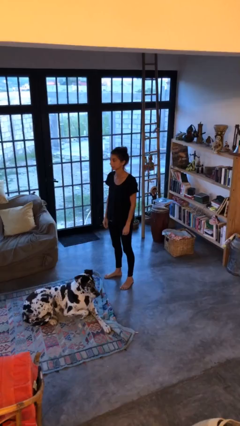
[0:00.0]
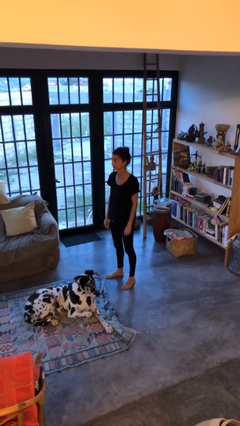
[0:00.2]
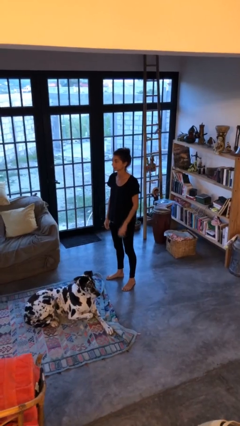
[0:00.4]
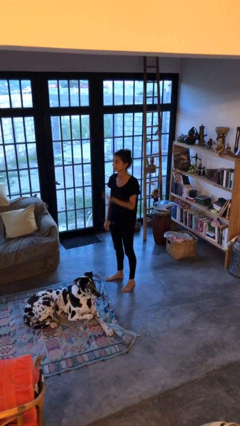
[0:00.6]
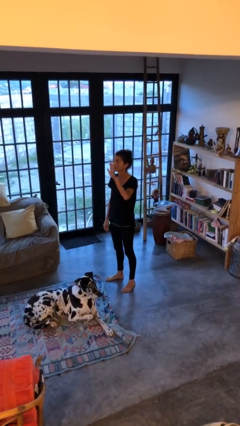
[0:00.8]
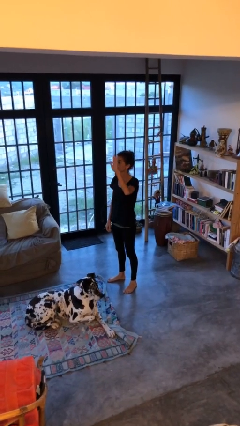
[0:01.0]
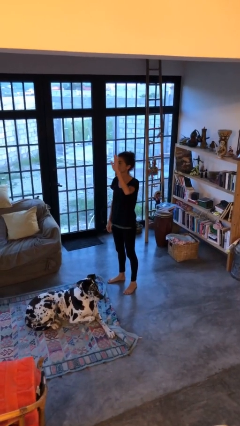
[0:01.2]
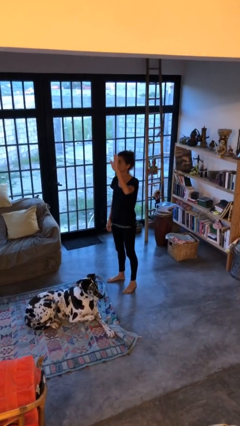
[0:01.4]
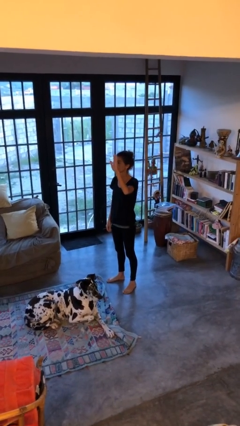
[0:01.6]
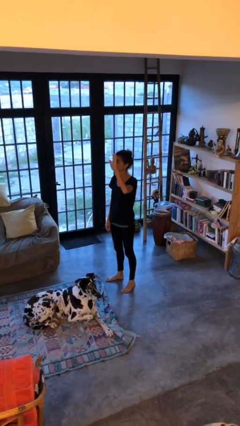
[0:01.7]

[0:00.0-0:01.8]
person gestures raise hand

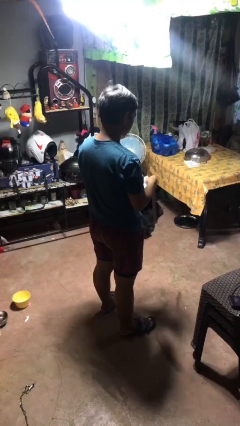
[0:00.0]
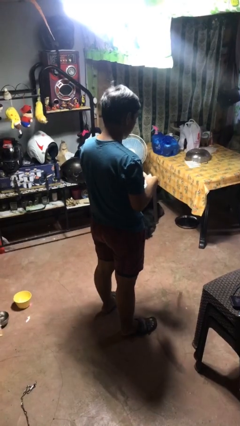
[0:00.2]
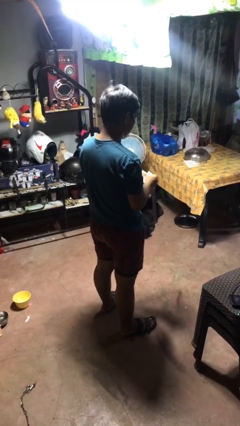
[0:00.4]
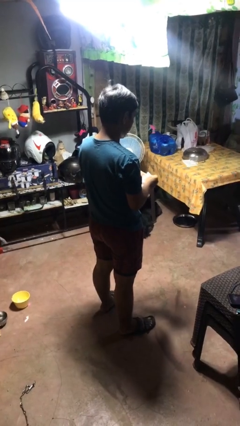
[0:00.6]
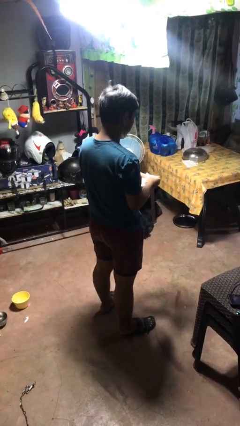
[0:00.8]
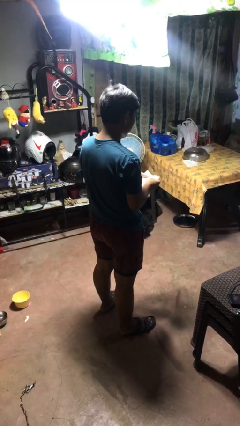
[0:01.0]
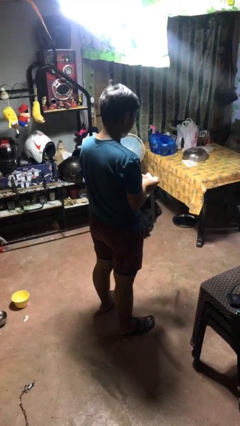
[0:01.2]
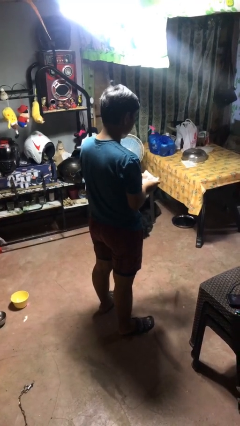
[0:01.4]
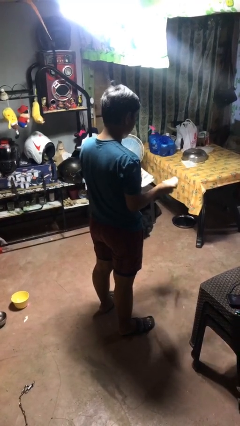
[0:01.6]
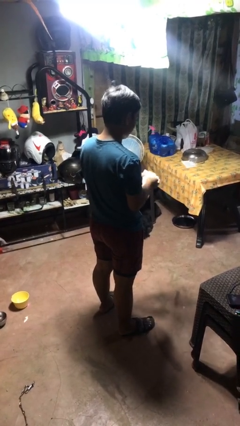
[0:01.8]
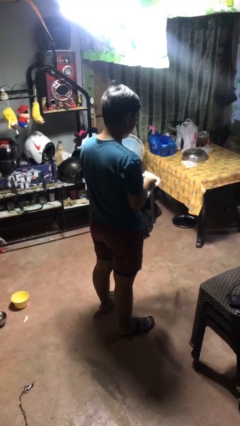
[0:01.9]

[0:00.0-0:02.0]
person tears paper

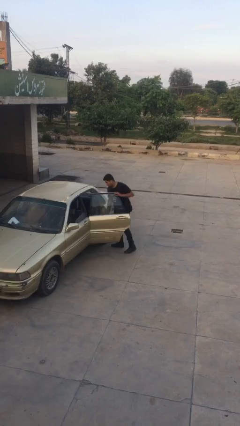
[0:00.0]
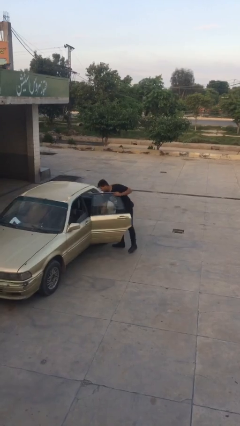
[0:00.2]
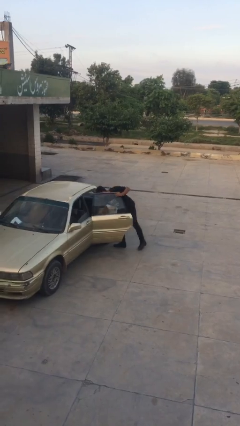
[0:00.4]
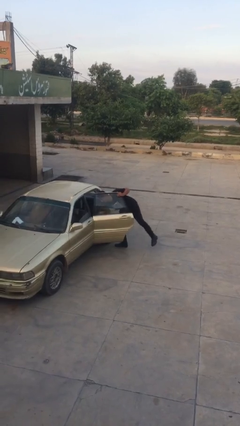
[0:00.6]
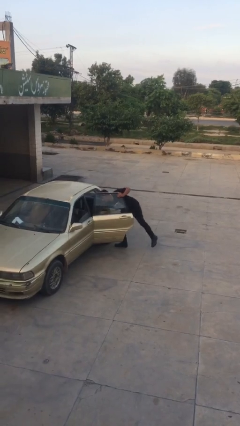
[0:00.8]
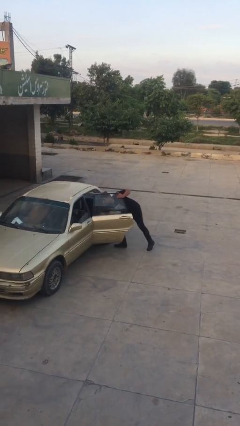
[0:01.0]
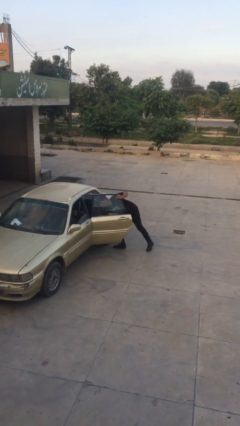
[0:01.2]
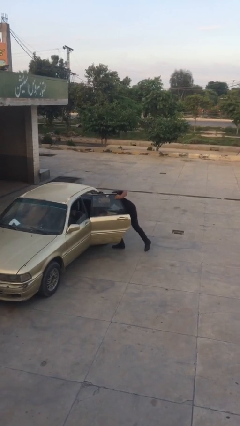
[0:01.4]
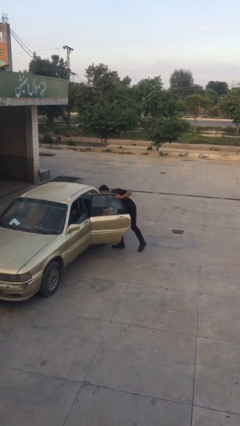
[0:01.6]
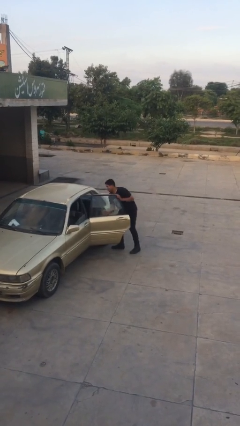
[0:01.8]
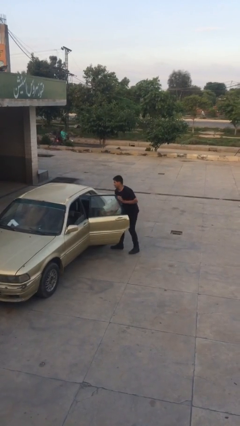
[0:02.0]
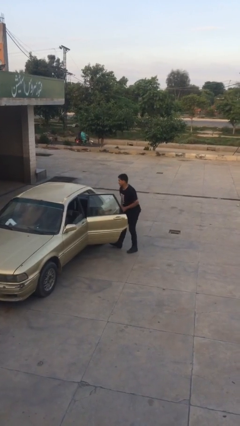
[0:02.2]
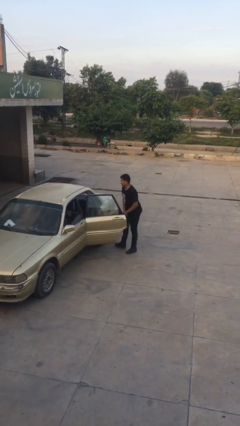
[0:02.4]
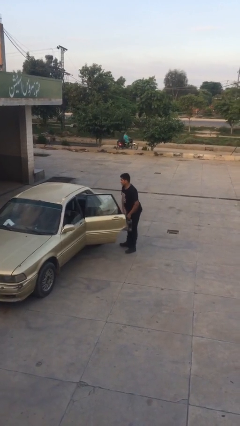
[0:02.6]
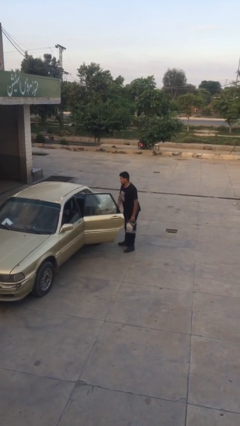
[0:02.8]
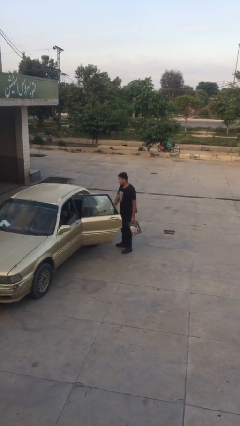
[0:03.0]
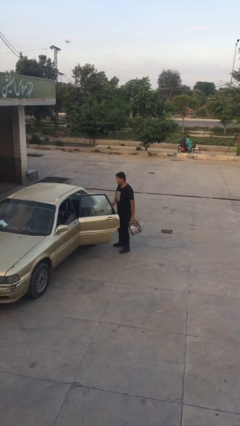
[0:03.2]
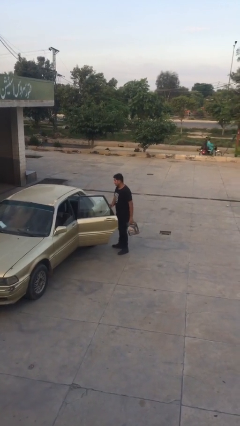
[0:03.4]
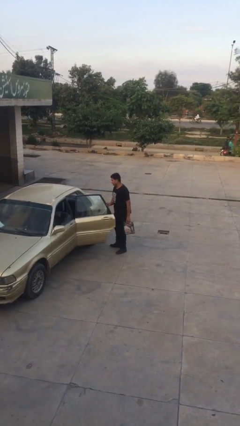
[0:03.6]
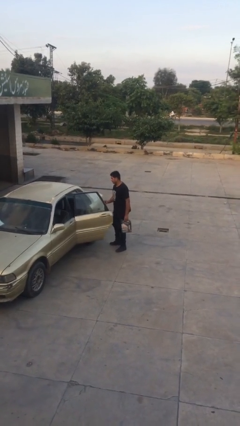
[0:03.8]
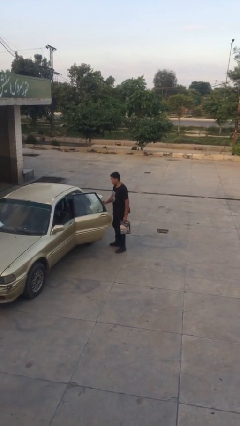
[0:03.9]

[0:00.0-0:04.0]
person unloads car

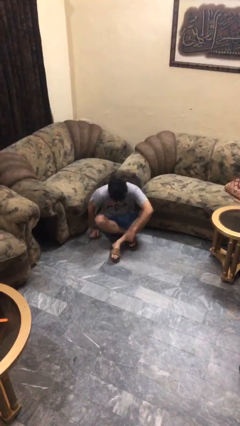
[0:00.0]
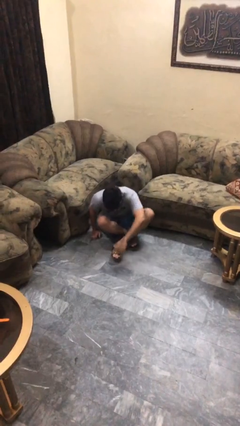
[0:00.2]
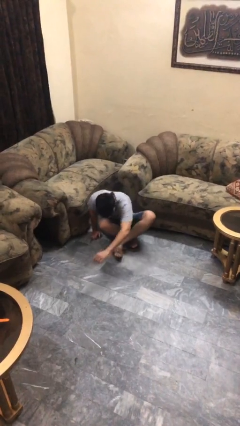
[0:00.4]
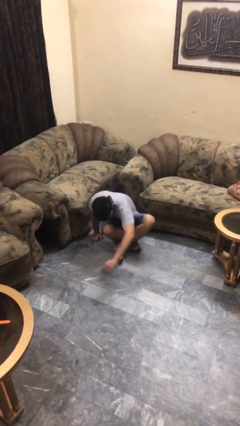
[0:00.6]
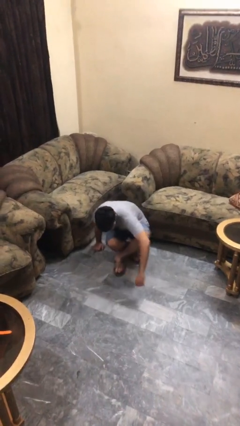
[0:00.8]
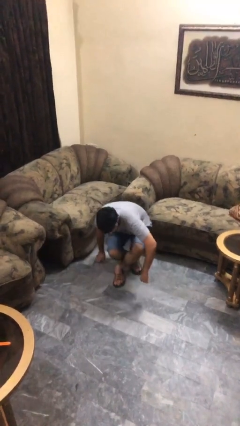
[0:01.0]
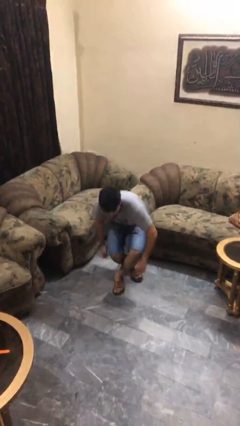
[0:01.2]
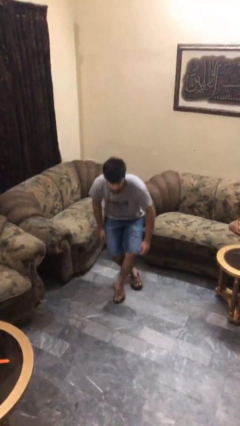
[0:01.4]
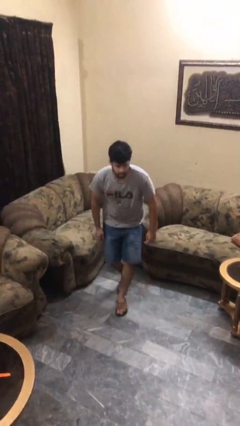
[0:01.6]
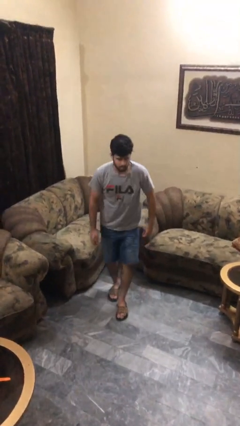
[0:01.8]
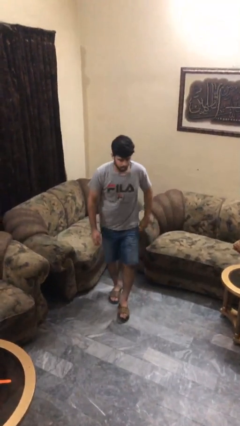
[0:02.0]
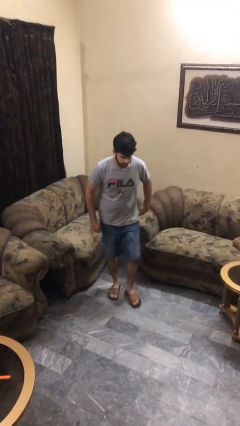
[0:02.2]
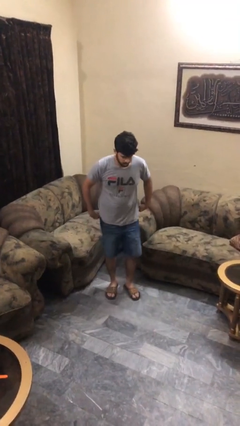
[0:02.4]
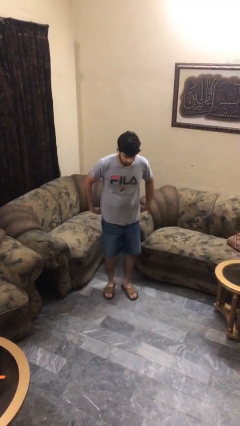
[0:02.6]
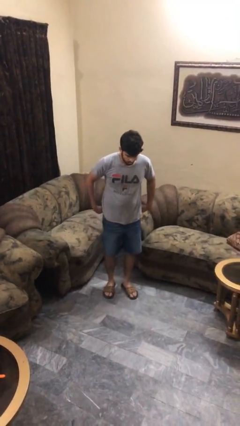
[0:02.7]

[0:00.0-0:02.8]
person stands up from floor

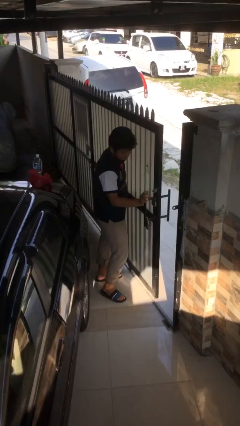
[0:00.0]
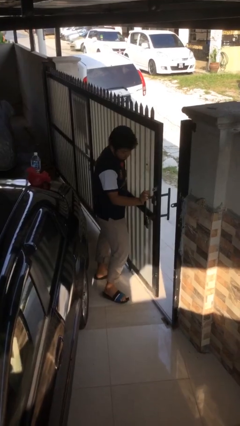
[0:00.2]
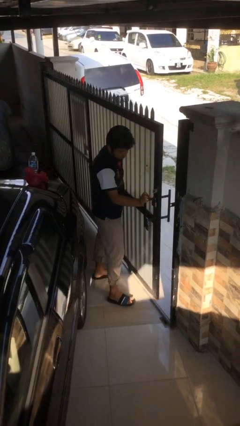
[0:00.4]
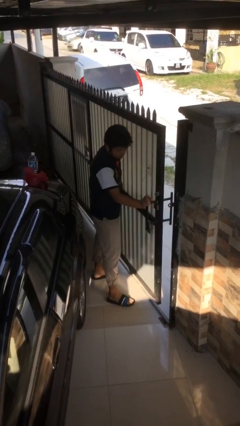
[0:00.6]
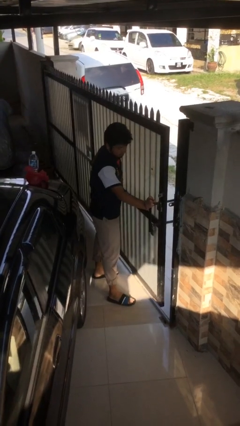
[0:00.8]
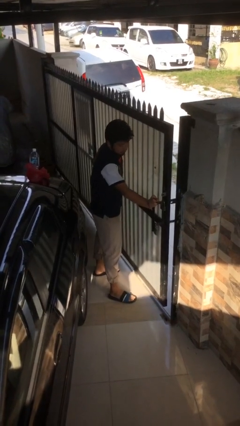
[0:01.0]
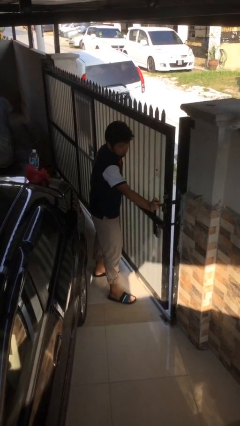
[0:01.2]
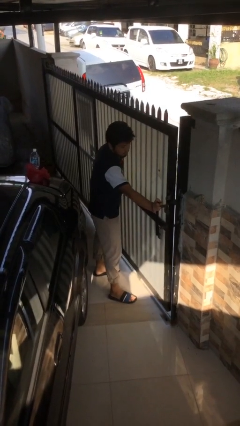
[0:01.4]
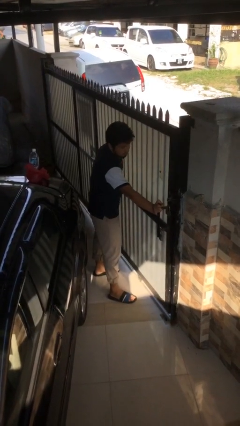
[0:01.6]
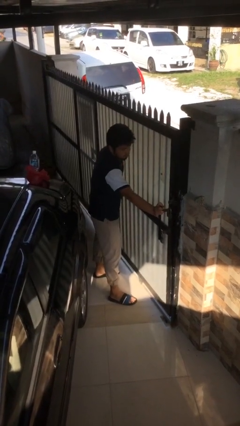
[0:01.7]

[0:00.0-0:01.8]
person closes sliding door

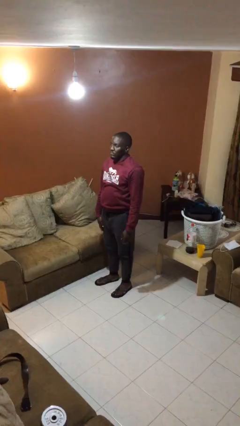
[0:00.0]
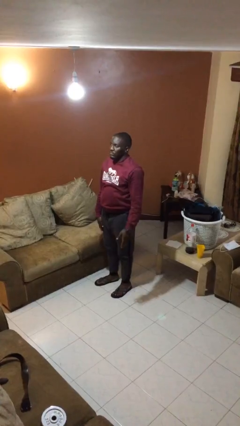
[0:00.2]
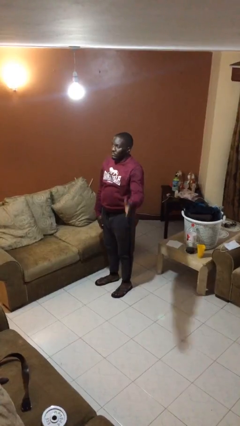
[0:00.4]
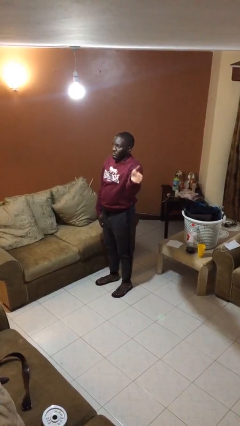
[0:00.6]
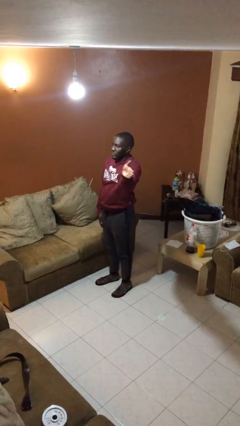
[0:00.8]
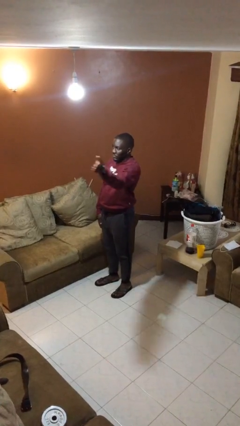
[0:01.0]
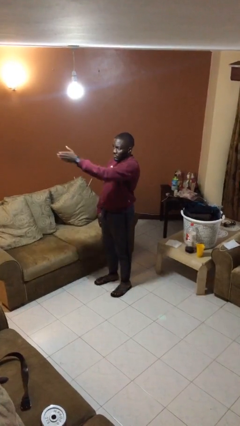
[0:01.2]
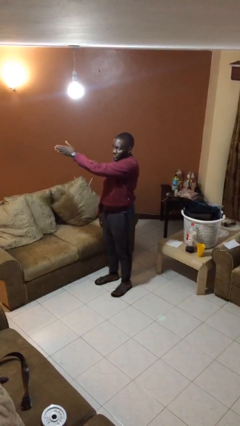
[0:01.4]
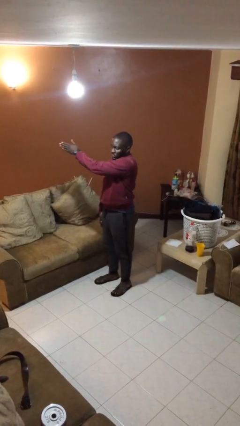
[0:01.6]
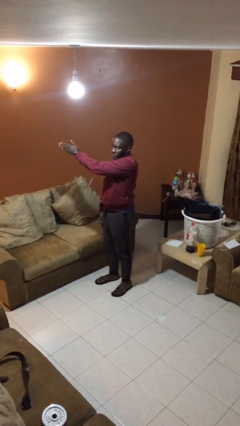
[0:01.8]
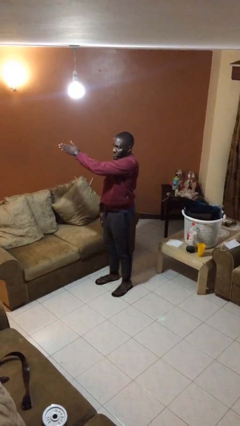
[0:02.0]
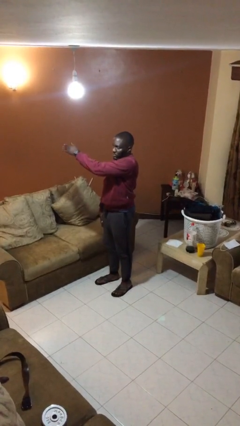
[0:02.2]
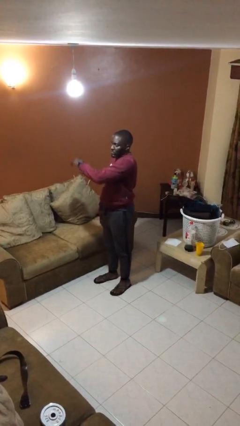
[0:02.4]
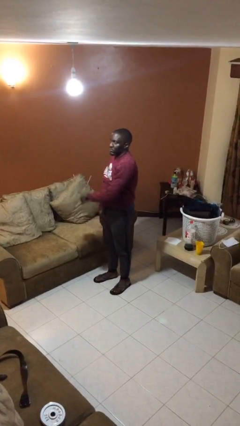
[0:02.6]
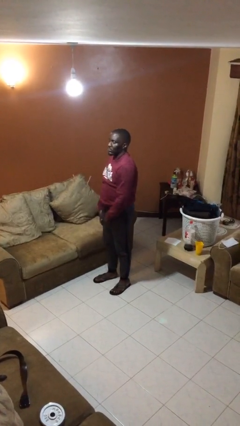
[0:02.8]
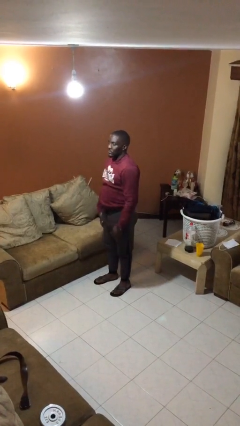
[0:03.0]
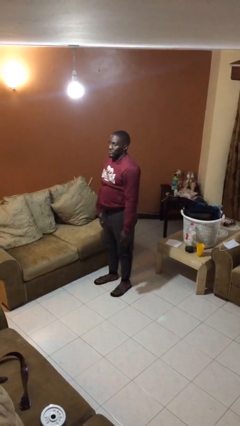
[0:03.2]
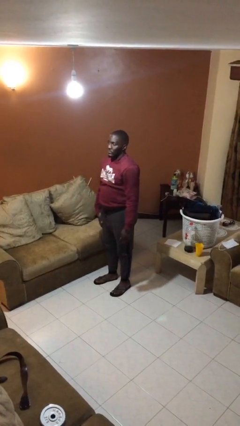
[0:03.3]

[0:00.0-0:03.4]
person gestures swipe right

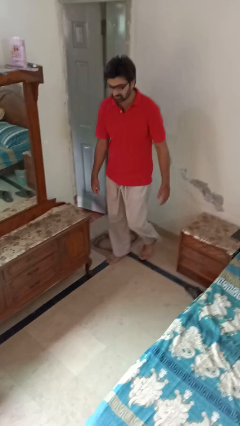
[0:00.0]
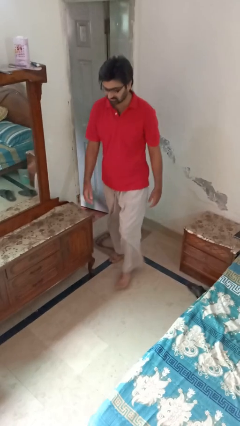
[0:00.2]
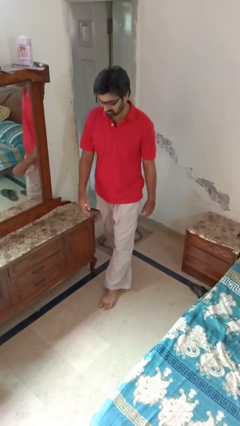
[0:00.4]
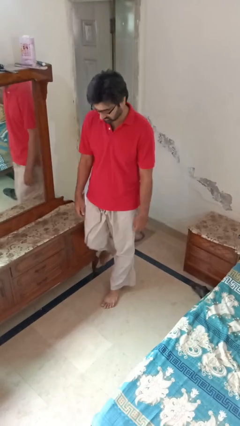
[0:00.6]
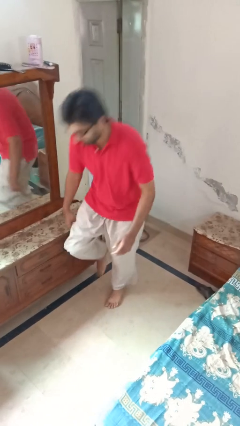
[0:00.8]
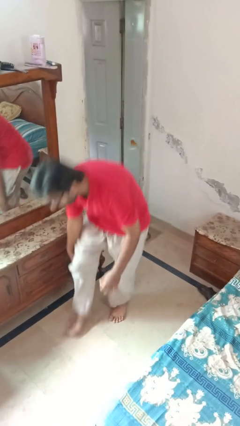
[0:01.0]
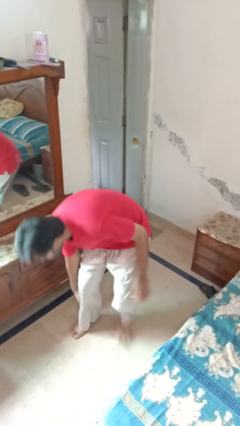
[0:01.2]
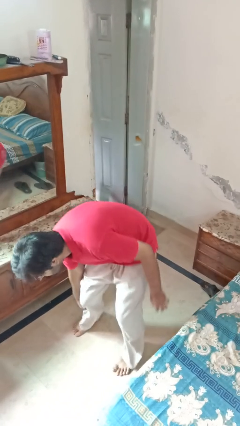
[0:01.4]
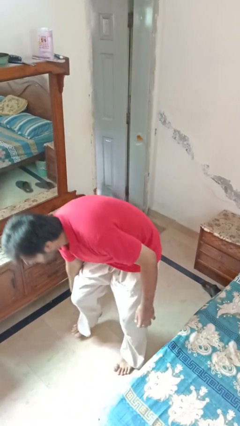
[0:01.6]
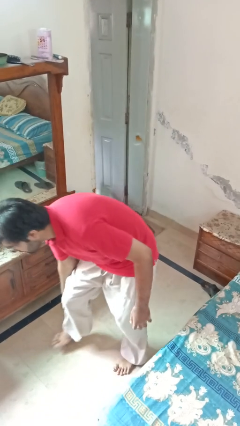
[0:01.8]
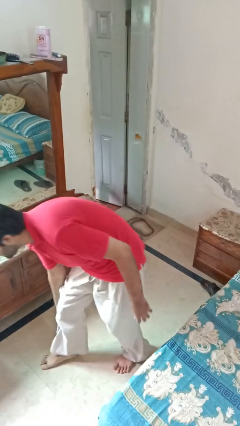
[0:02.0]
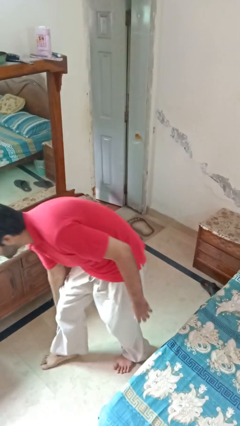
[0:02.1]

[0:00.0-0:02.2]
person stubs toe
